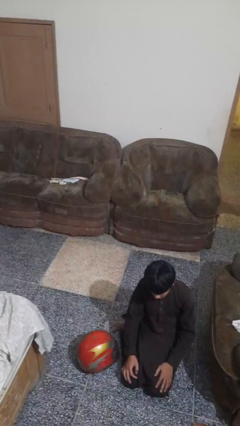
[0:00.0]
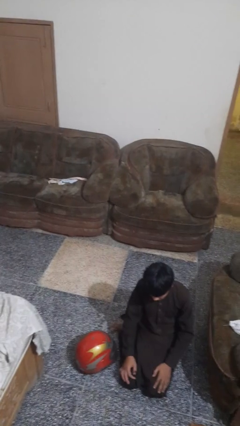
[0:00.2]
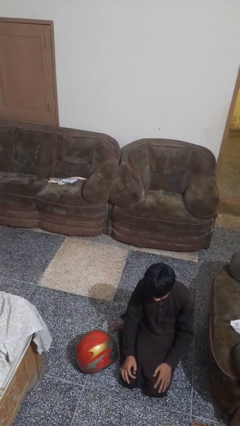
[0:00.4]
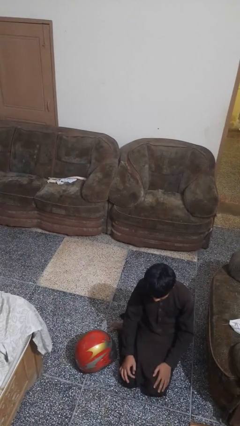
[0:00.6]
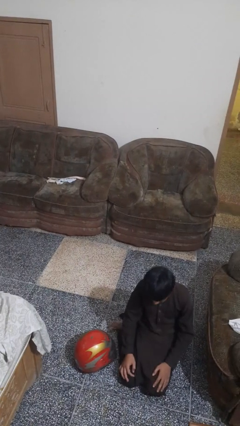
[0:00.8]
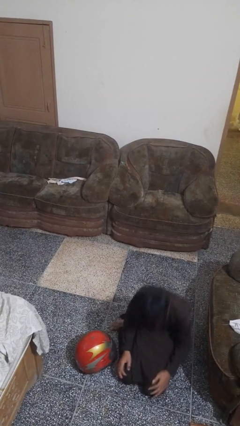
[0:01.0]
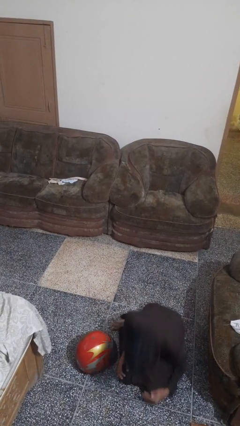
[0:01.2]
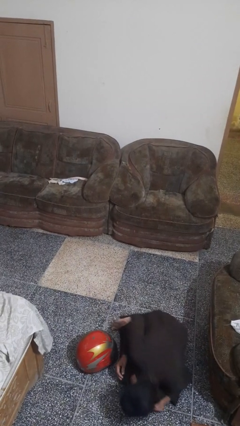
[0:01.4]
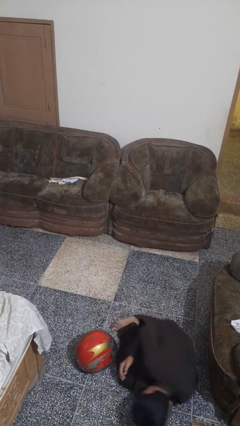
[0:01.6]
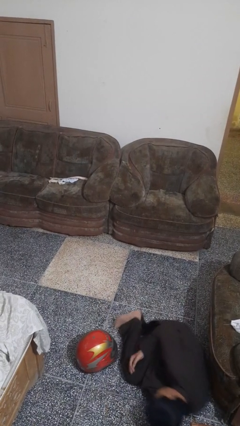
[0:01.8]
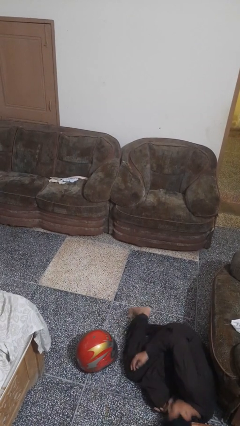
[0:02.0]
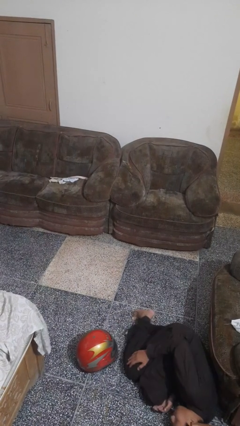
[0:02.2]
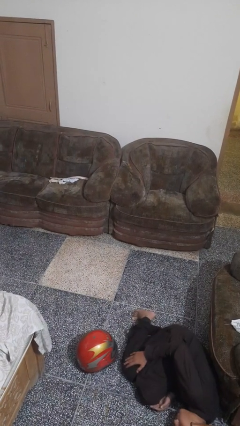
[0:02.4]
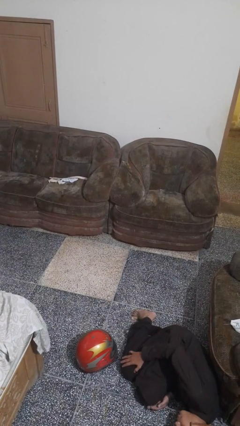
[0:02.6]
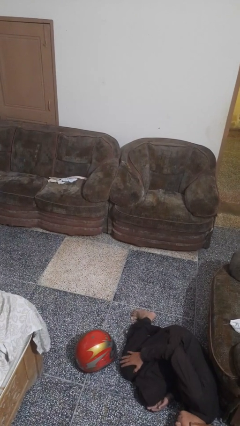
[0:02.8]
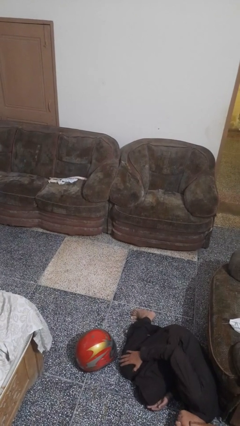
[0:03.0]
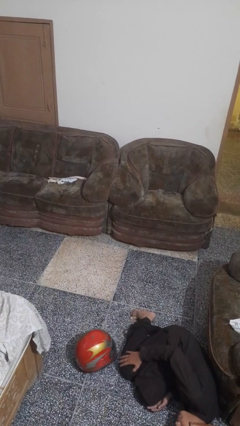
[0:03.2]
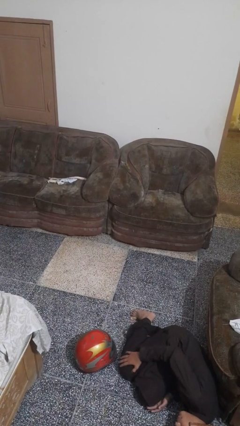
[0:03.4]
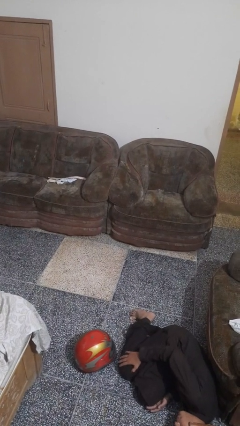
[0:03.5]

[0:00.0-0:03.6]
person lies down on floor

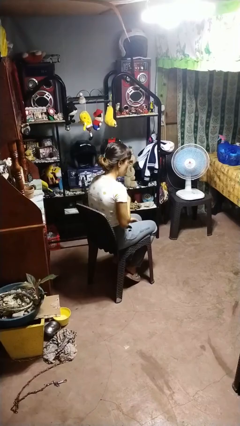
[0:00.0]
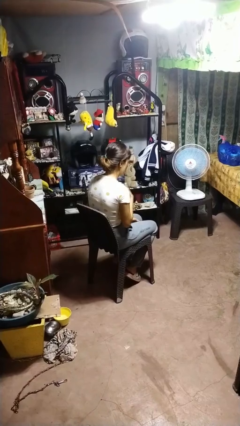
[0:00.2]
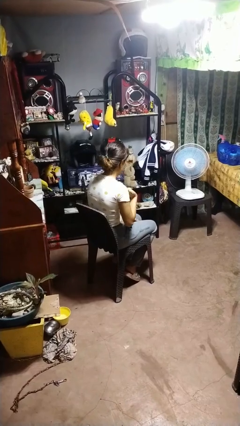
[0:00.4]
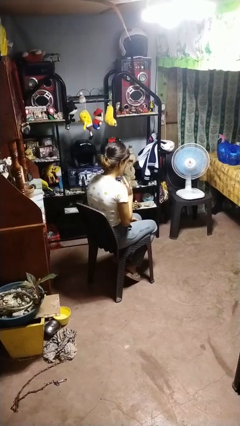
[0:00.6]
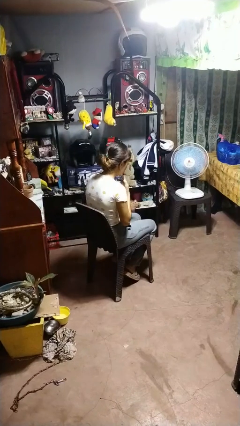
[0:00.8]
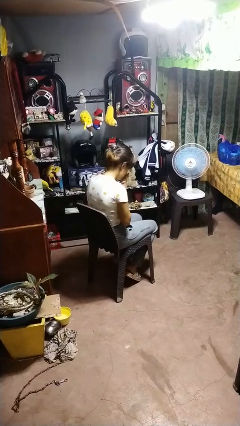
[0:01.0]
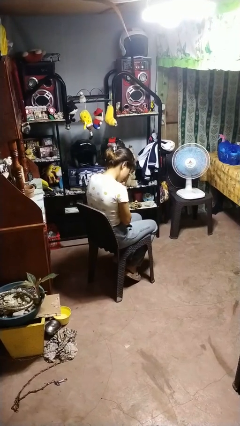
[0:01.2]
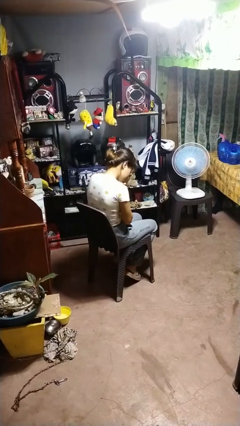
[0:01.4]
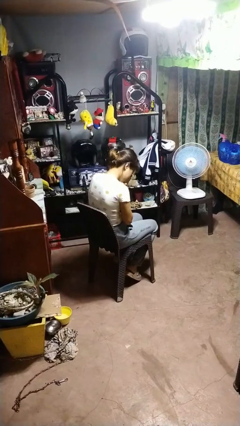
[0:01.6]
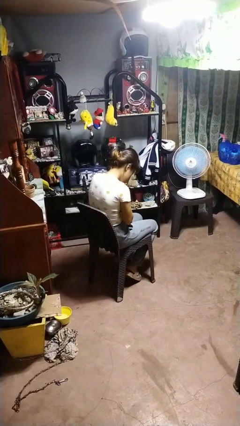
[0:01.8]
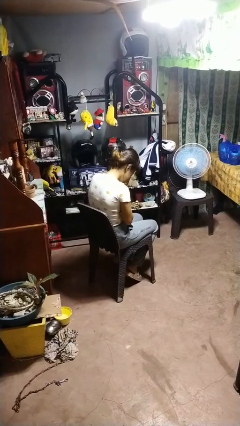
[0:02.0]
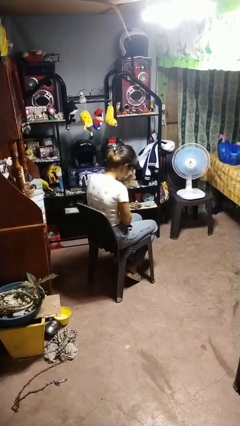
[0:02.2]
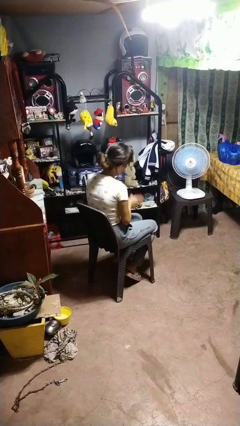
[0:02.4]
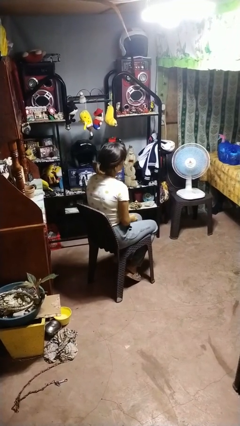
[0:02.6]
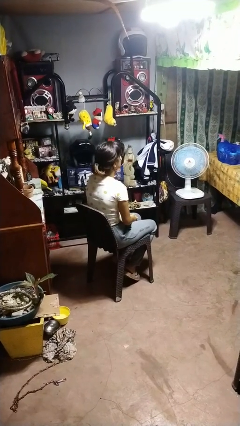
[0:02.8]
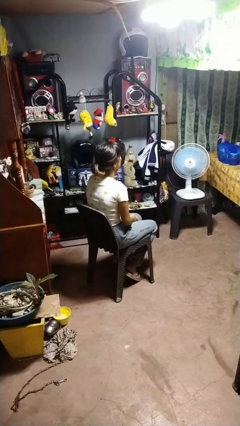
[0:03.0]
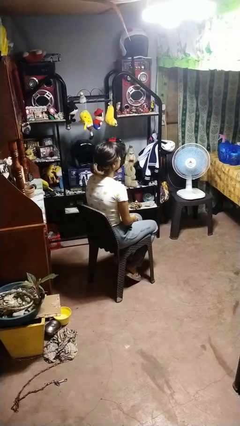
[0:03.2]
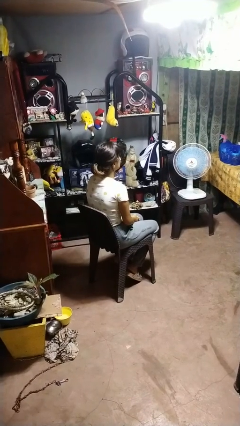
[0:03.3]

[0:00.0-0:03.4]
person prays

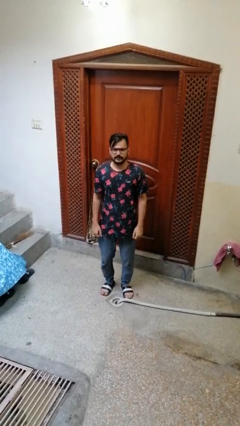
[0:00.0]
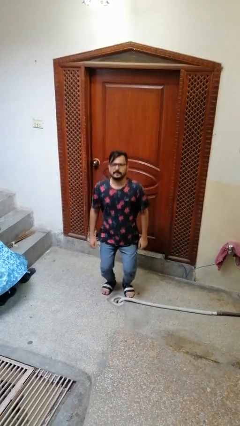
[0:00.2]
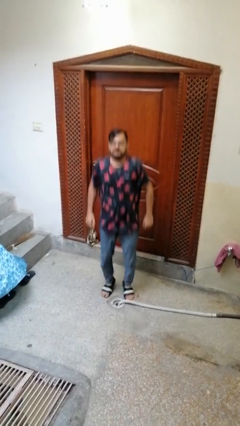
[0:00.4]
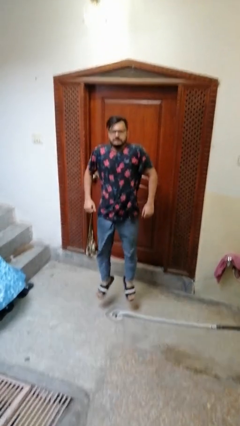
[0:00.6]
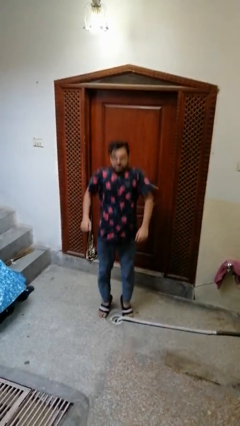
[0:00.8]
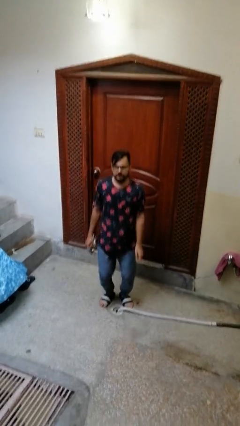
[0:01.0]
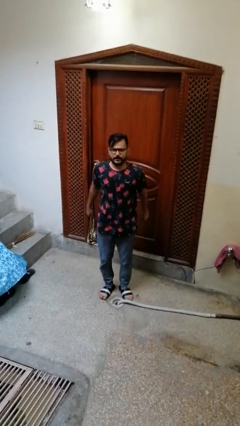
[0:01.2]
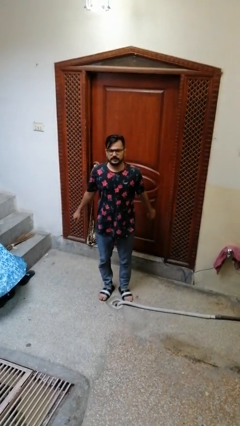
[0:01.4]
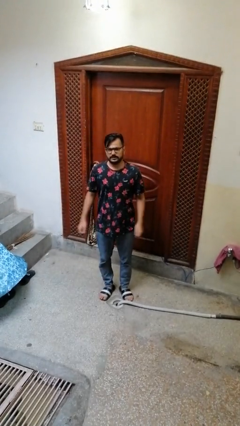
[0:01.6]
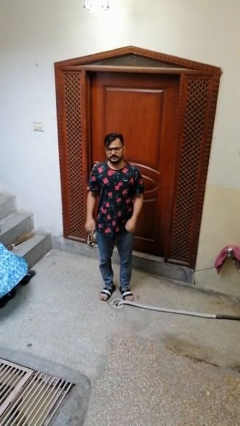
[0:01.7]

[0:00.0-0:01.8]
person jumps

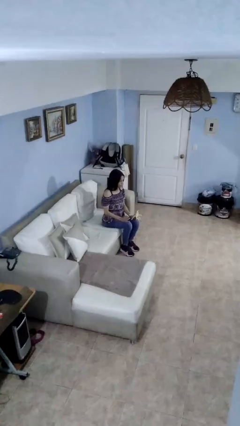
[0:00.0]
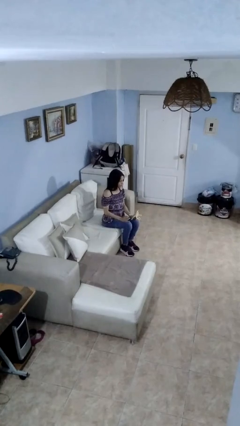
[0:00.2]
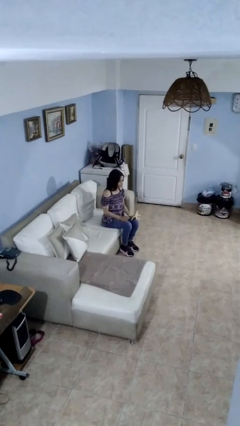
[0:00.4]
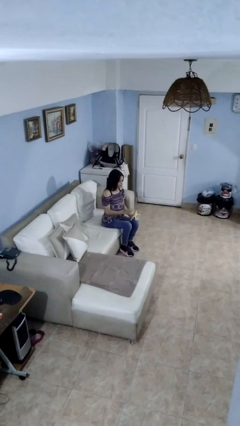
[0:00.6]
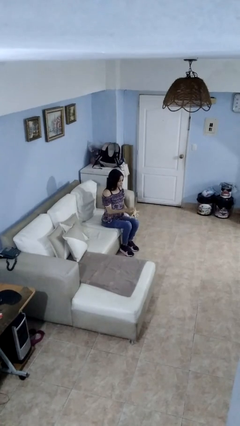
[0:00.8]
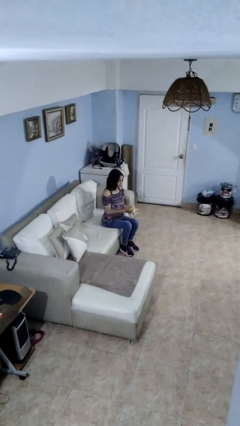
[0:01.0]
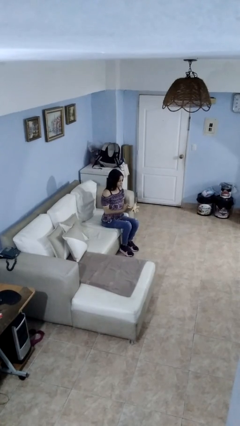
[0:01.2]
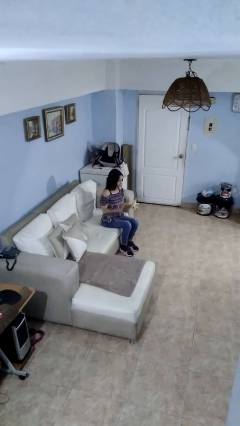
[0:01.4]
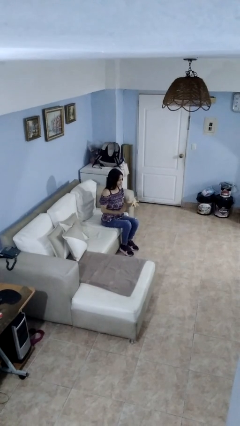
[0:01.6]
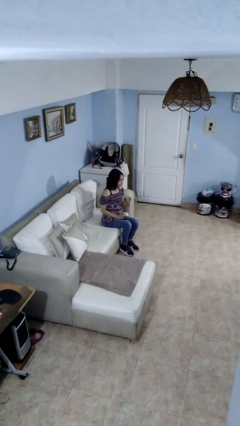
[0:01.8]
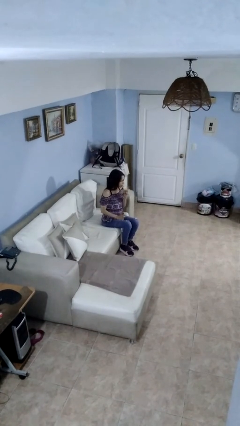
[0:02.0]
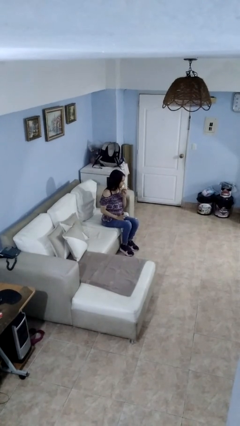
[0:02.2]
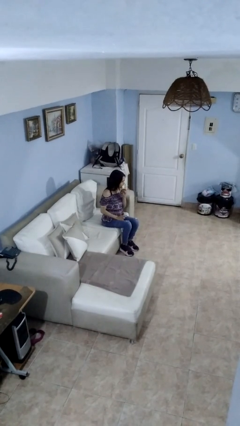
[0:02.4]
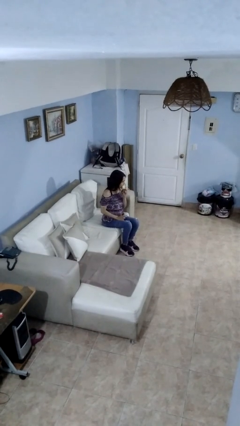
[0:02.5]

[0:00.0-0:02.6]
person eats banana

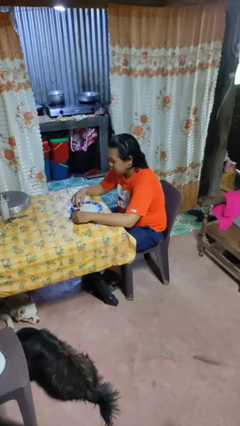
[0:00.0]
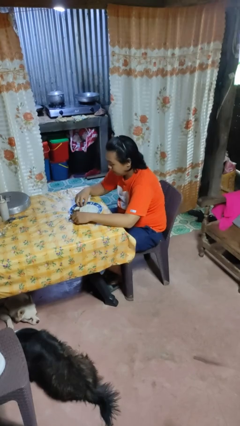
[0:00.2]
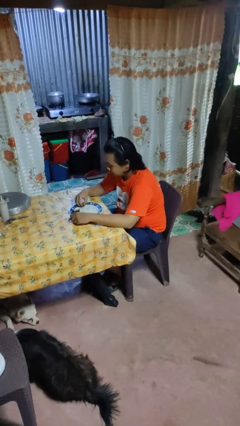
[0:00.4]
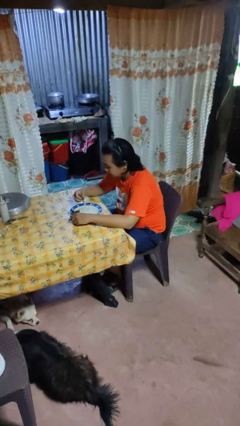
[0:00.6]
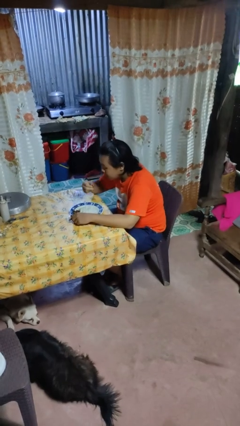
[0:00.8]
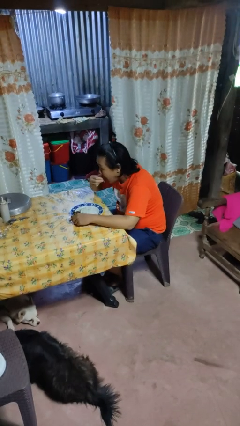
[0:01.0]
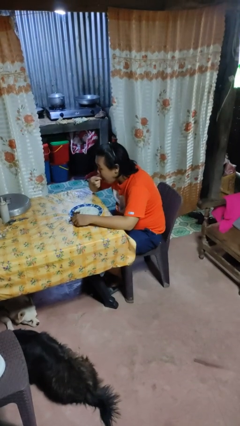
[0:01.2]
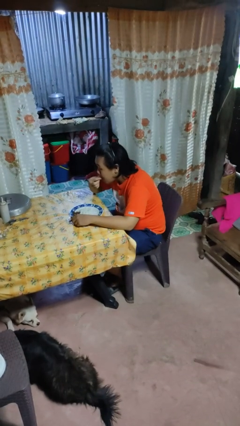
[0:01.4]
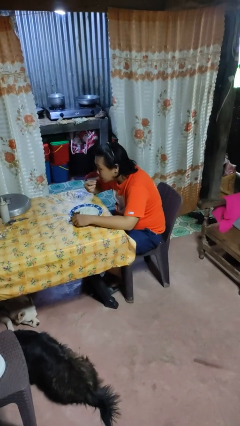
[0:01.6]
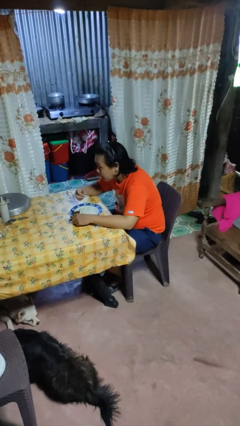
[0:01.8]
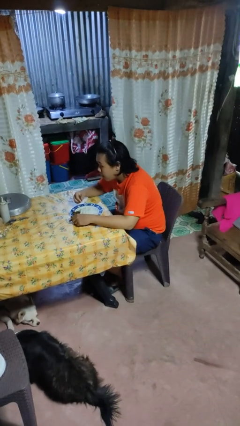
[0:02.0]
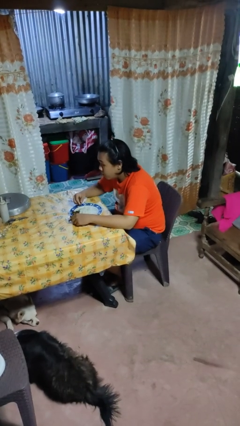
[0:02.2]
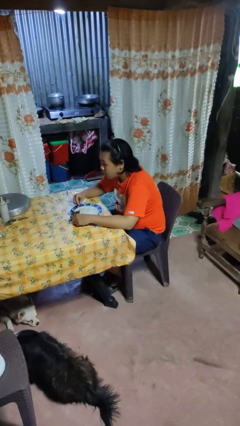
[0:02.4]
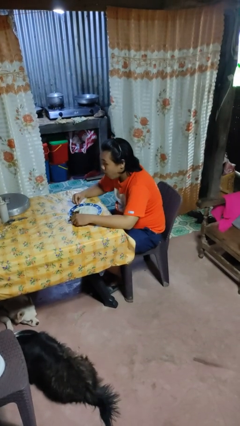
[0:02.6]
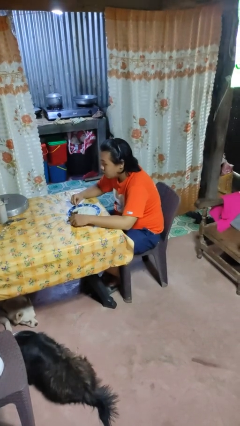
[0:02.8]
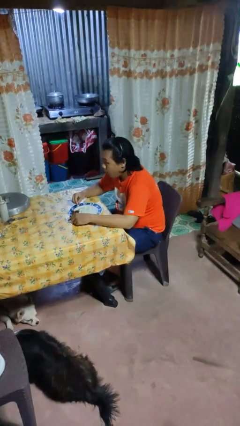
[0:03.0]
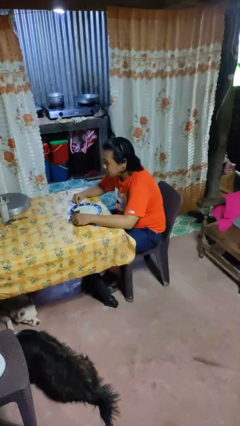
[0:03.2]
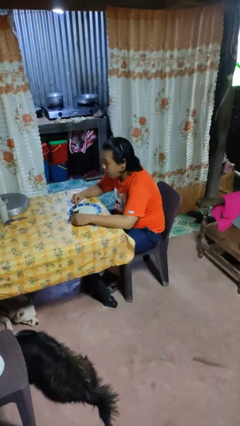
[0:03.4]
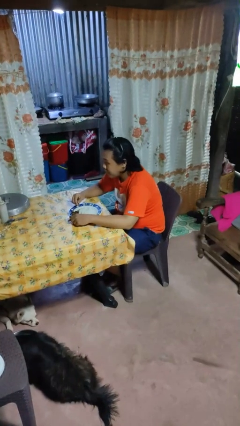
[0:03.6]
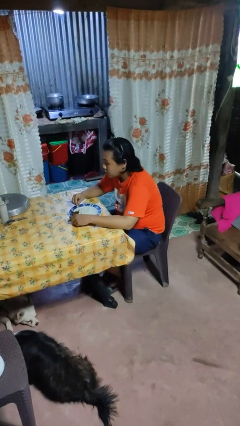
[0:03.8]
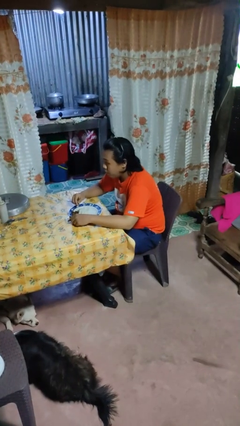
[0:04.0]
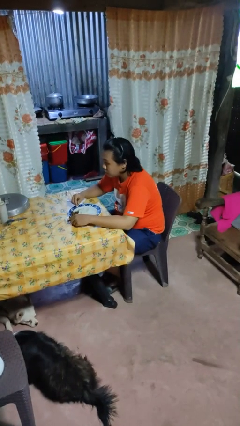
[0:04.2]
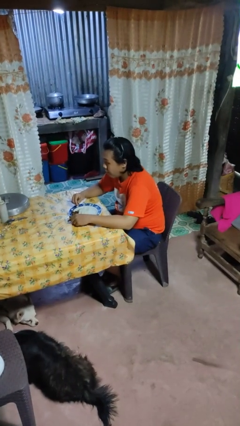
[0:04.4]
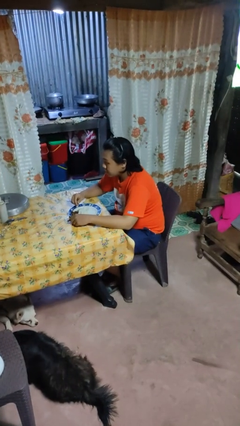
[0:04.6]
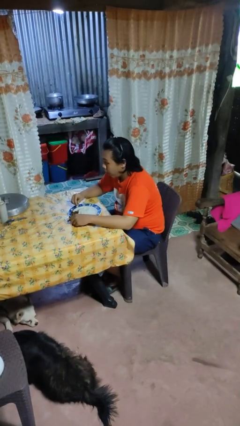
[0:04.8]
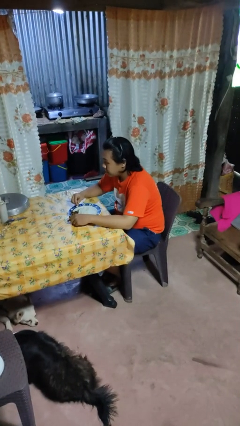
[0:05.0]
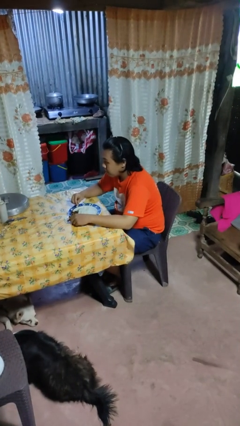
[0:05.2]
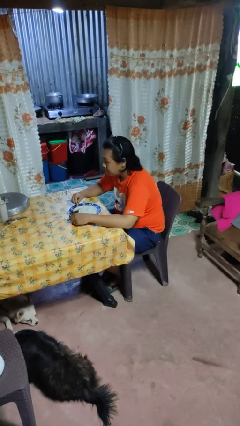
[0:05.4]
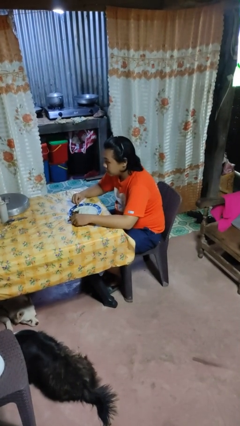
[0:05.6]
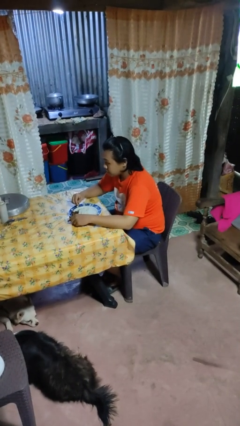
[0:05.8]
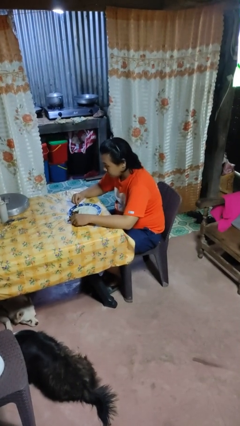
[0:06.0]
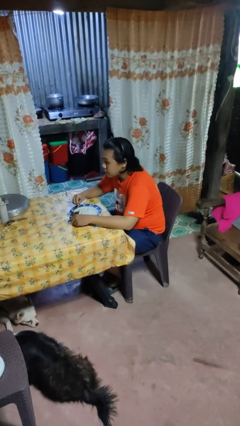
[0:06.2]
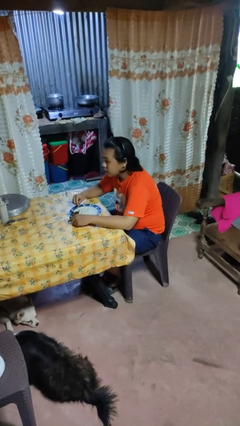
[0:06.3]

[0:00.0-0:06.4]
person eats with hands
